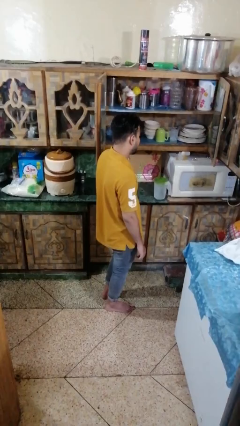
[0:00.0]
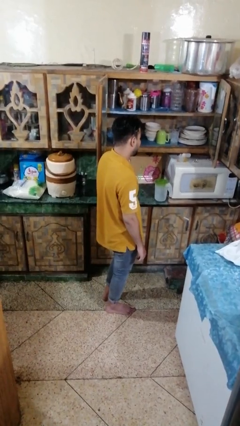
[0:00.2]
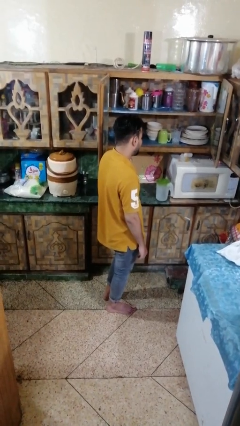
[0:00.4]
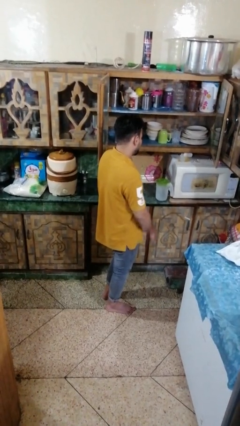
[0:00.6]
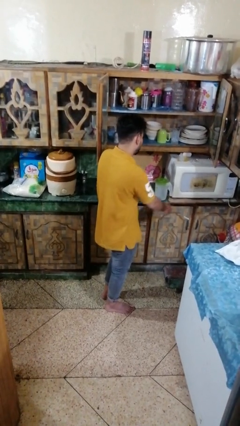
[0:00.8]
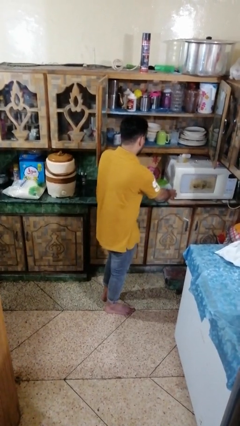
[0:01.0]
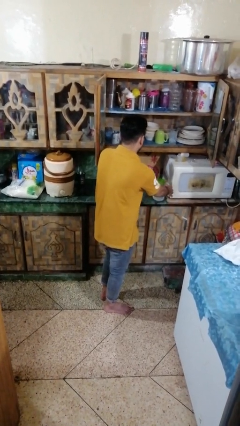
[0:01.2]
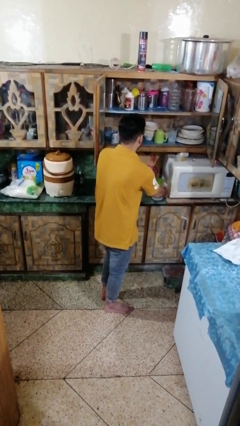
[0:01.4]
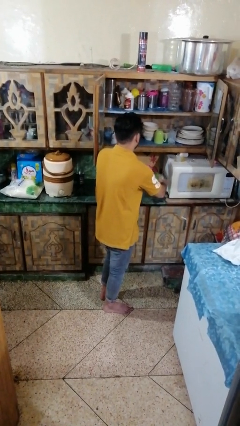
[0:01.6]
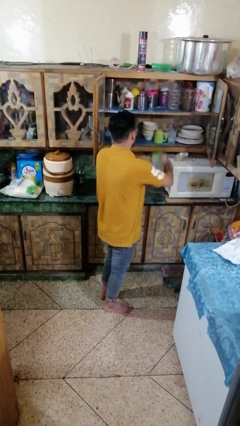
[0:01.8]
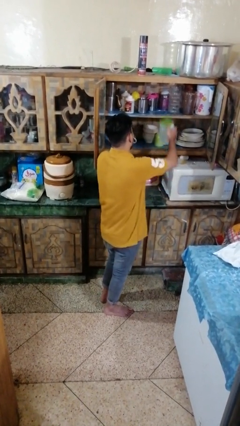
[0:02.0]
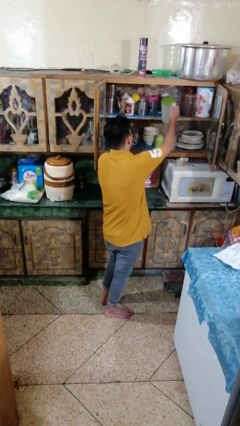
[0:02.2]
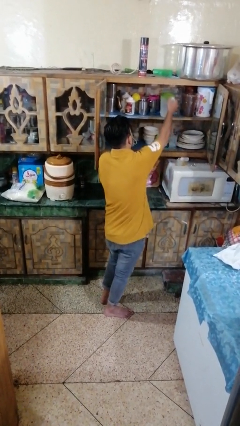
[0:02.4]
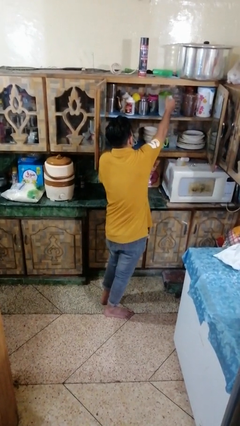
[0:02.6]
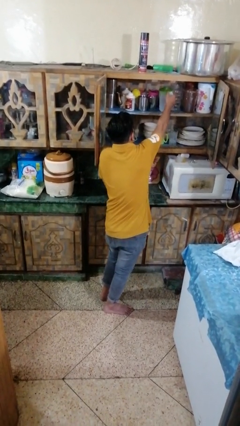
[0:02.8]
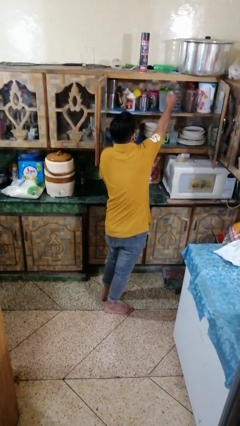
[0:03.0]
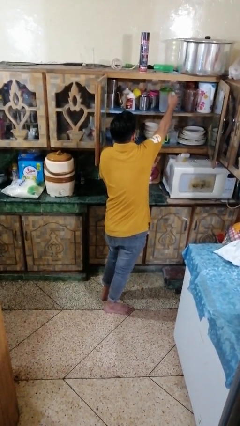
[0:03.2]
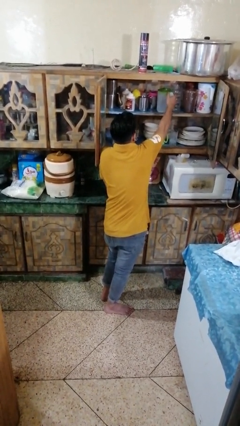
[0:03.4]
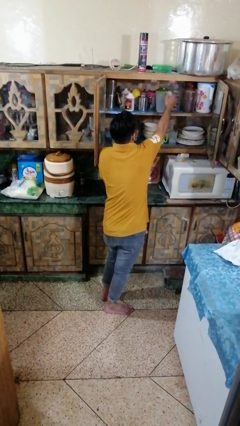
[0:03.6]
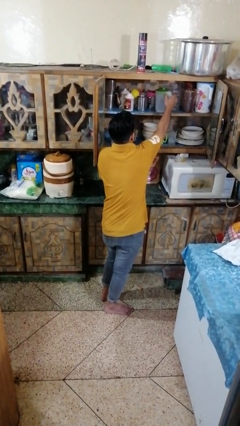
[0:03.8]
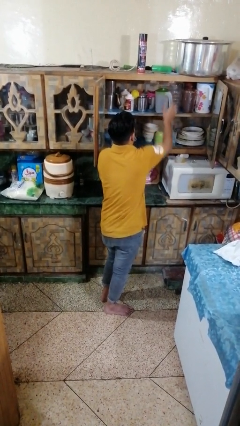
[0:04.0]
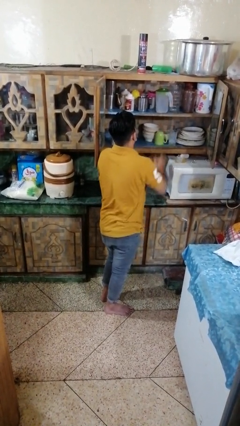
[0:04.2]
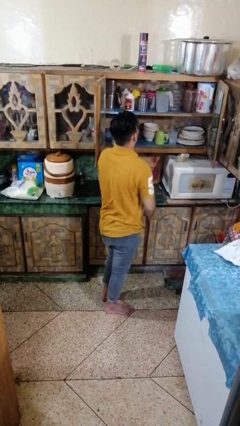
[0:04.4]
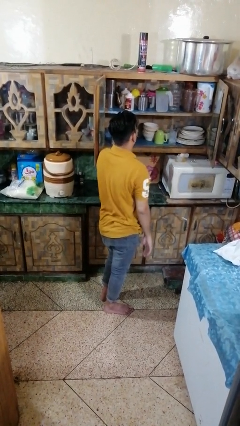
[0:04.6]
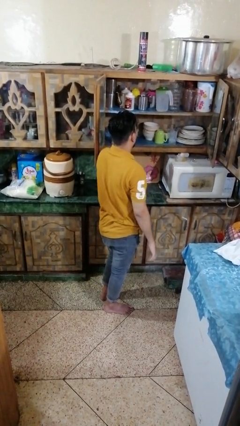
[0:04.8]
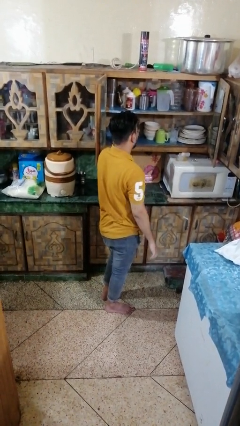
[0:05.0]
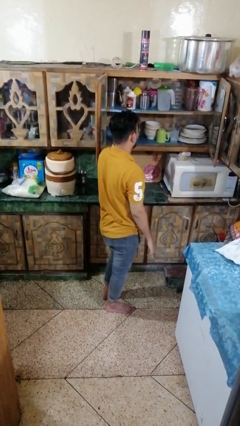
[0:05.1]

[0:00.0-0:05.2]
person puts object in cabinet

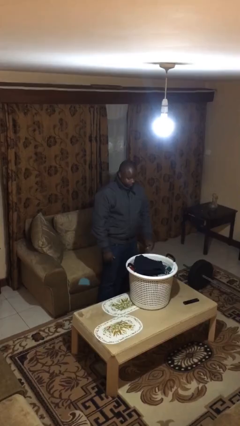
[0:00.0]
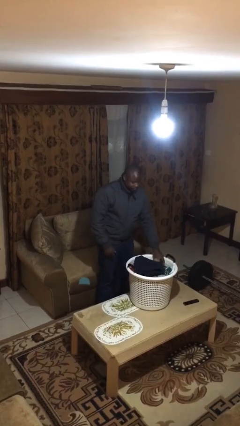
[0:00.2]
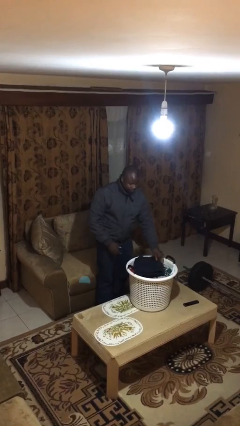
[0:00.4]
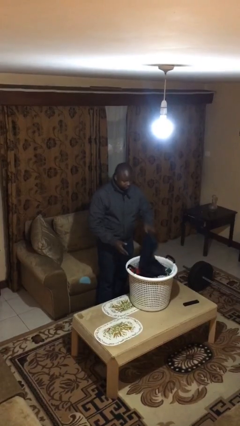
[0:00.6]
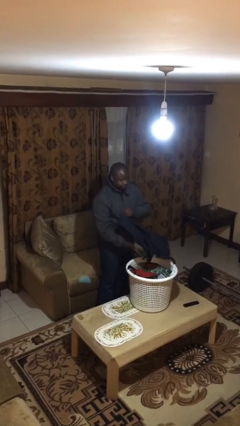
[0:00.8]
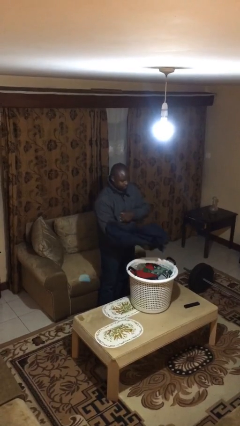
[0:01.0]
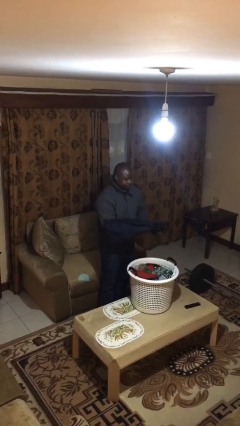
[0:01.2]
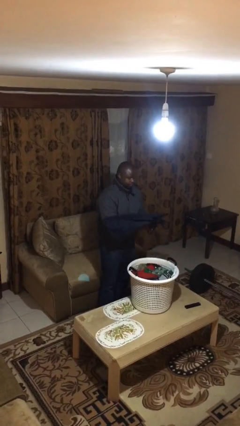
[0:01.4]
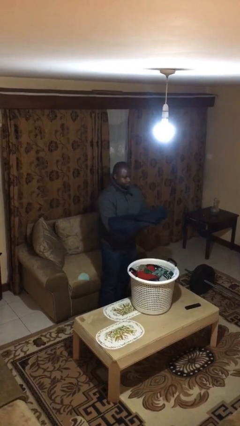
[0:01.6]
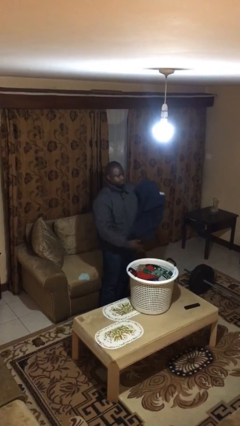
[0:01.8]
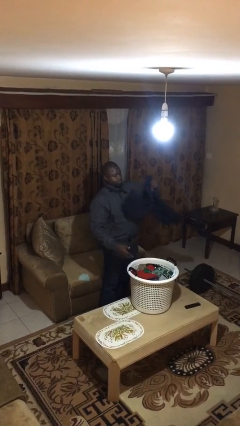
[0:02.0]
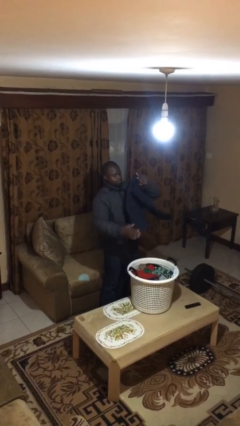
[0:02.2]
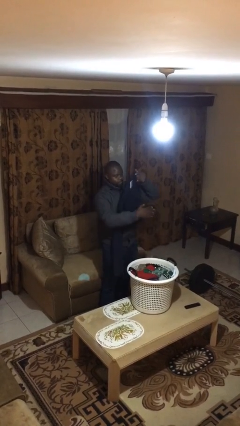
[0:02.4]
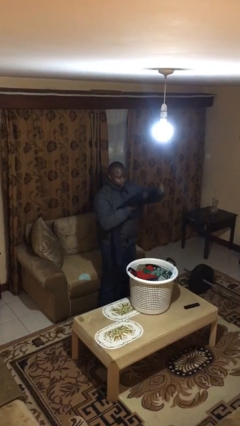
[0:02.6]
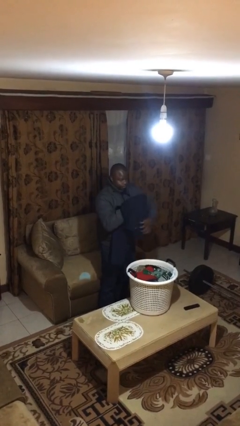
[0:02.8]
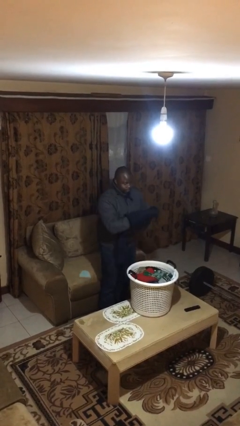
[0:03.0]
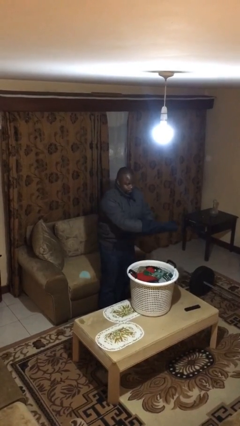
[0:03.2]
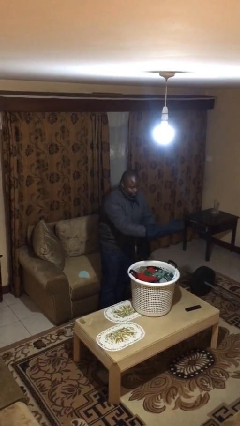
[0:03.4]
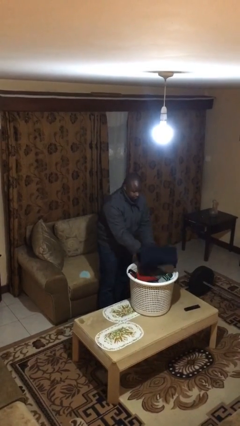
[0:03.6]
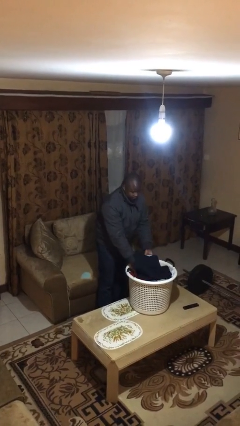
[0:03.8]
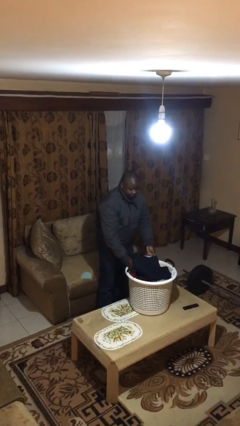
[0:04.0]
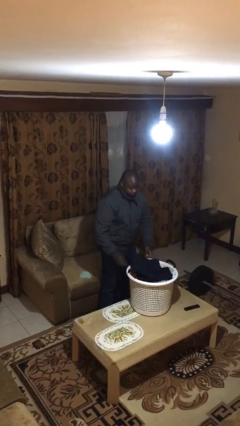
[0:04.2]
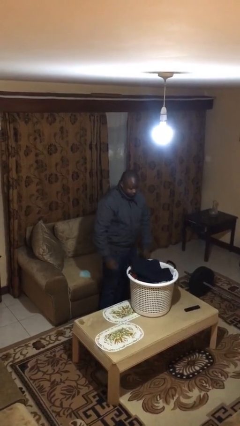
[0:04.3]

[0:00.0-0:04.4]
person folds pants

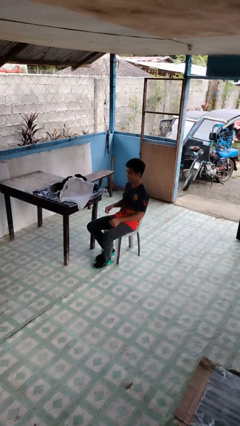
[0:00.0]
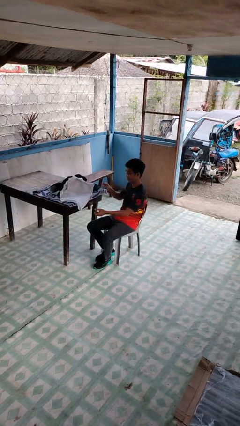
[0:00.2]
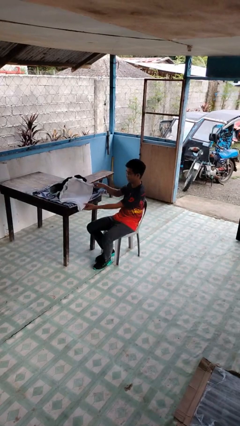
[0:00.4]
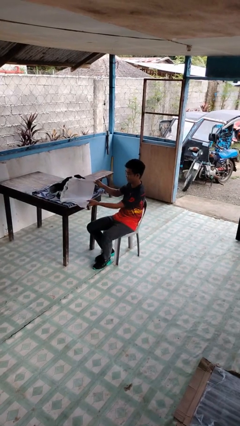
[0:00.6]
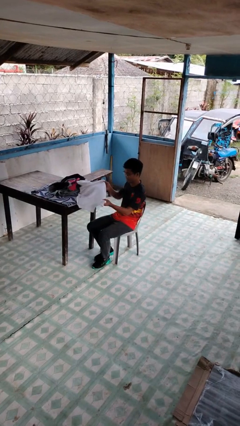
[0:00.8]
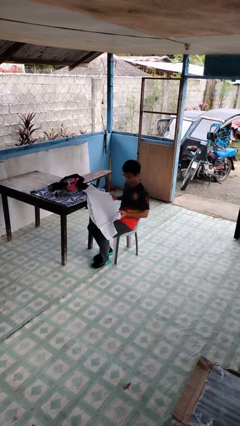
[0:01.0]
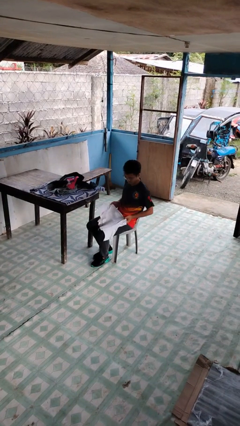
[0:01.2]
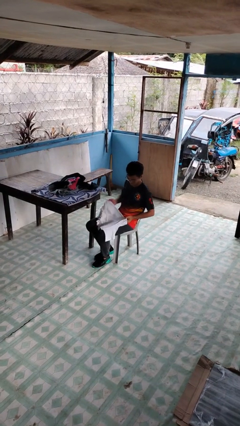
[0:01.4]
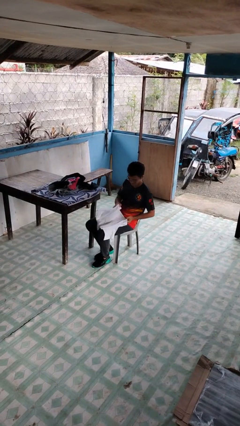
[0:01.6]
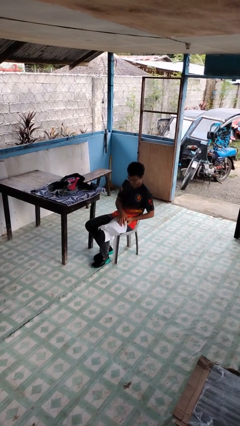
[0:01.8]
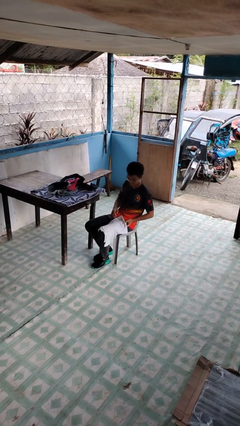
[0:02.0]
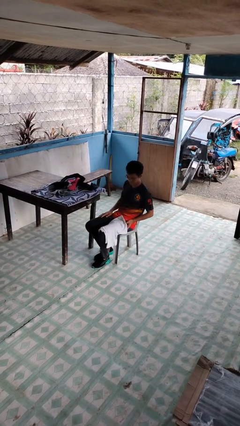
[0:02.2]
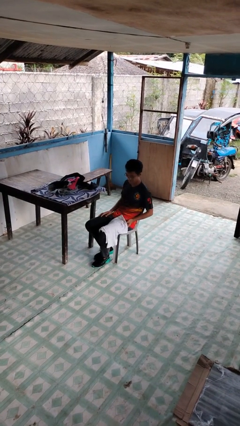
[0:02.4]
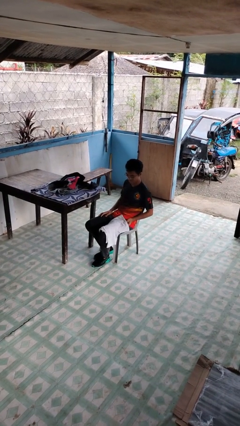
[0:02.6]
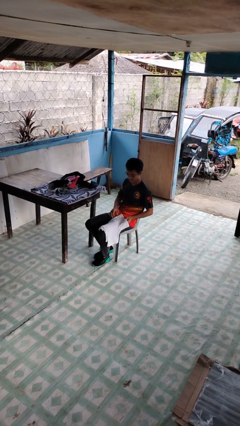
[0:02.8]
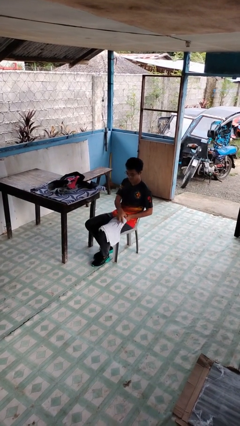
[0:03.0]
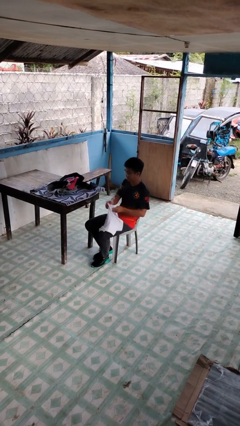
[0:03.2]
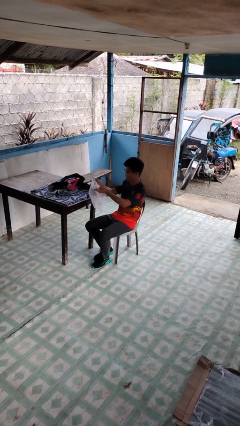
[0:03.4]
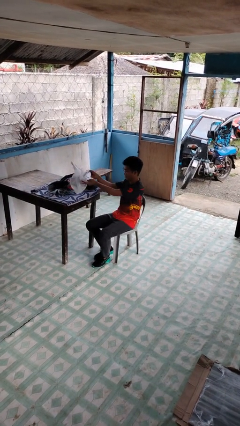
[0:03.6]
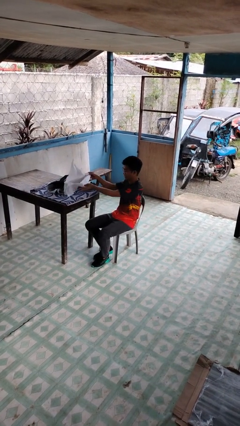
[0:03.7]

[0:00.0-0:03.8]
person folds shirt

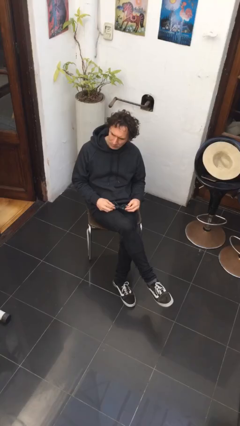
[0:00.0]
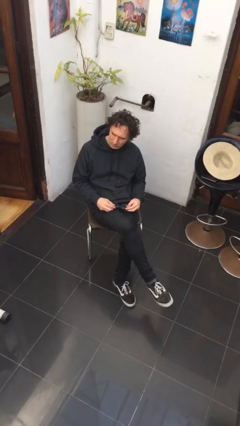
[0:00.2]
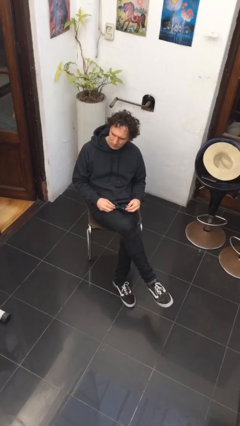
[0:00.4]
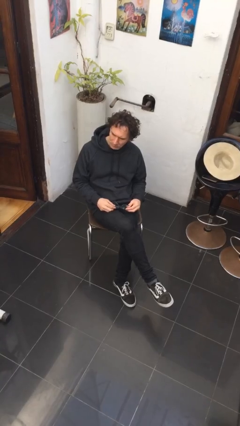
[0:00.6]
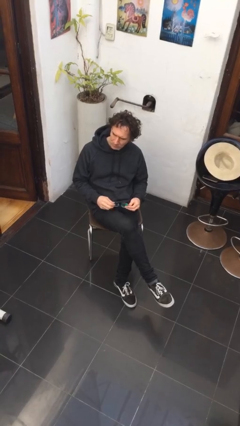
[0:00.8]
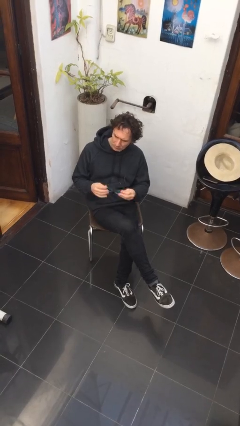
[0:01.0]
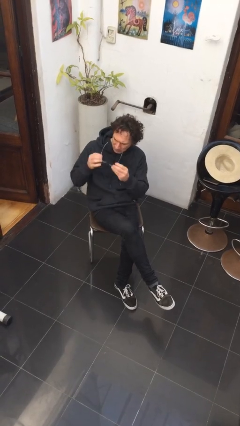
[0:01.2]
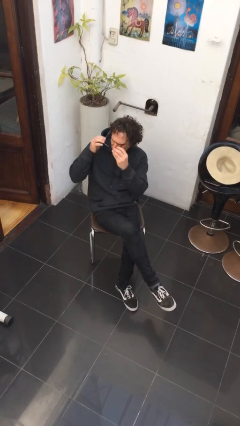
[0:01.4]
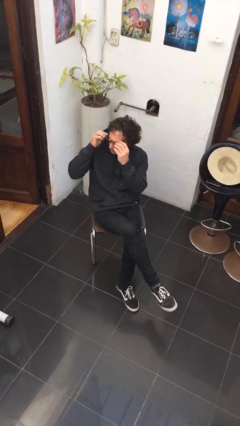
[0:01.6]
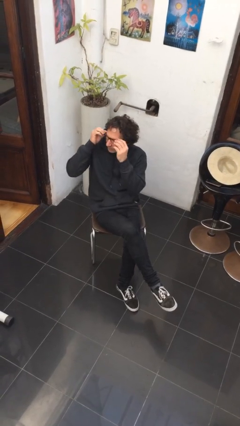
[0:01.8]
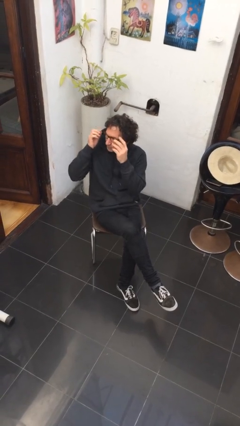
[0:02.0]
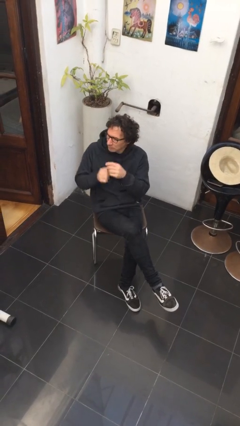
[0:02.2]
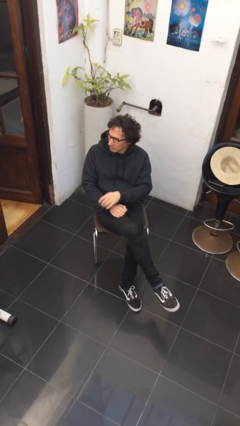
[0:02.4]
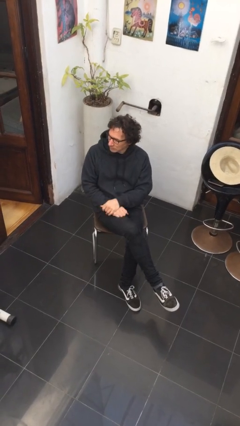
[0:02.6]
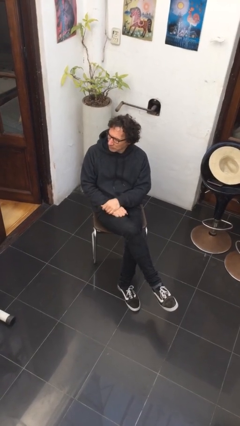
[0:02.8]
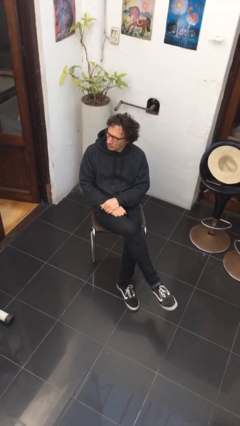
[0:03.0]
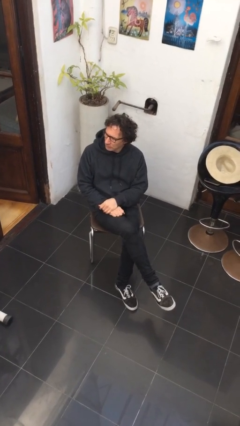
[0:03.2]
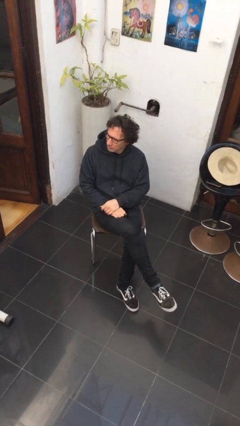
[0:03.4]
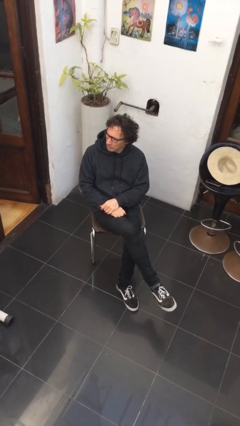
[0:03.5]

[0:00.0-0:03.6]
person puts on glasses

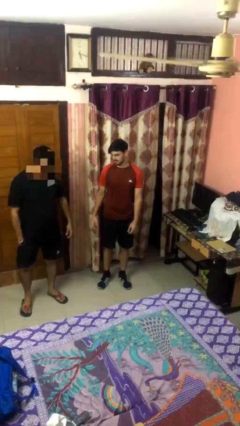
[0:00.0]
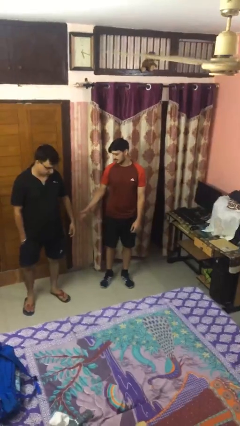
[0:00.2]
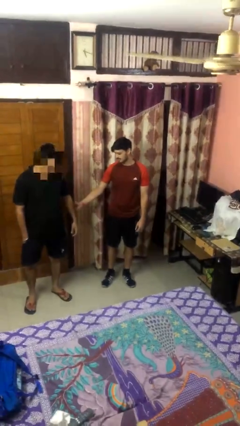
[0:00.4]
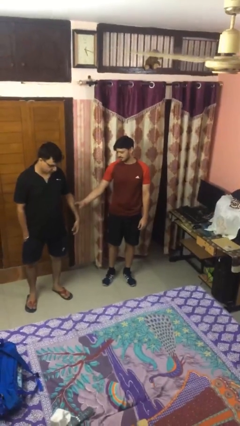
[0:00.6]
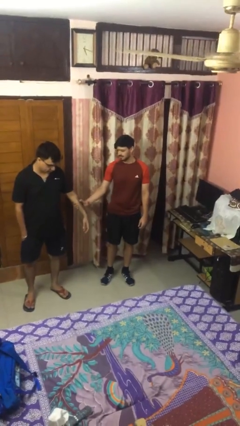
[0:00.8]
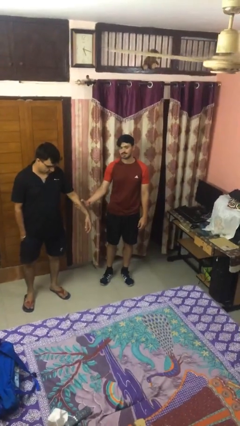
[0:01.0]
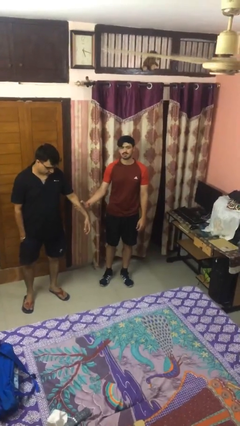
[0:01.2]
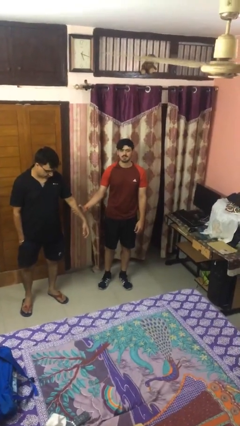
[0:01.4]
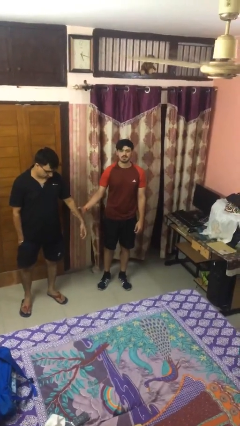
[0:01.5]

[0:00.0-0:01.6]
person grabs person by forearm
